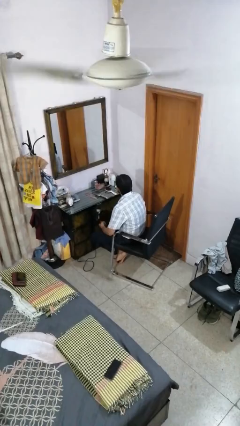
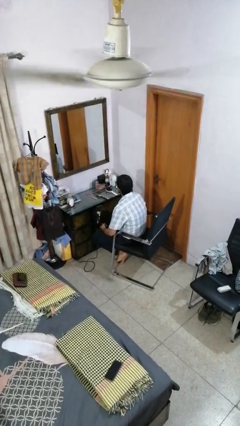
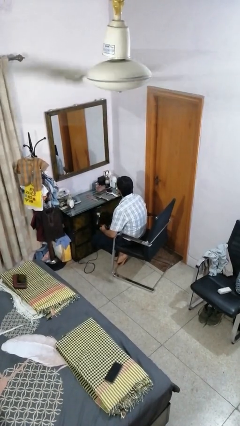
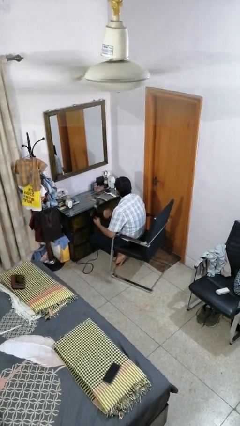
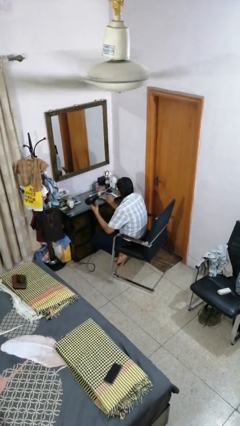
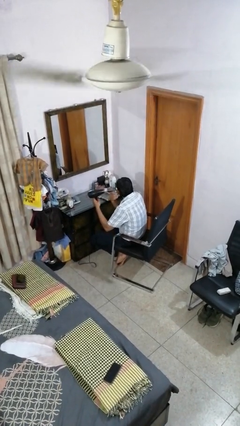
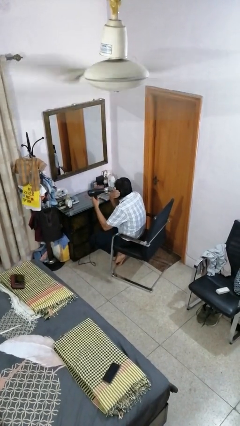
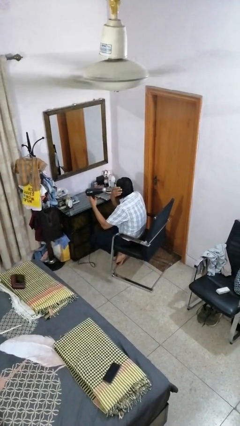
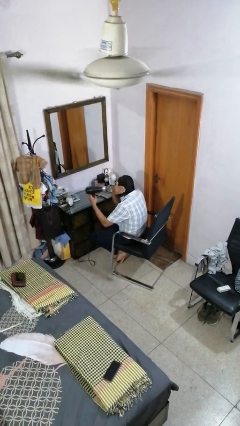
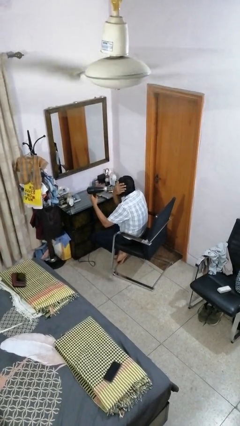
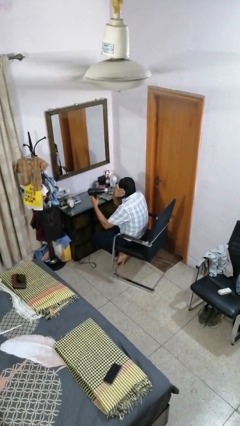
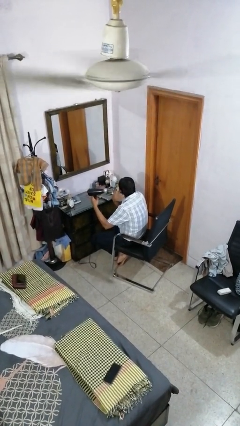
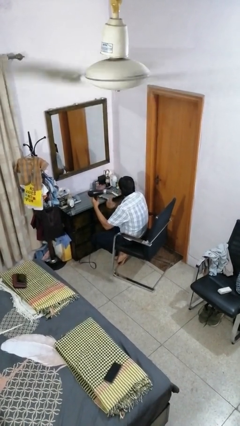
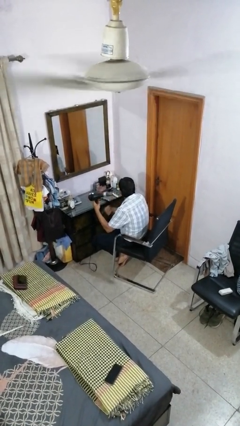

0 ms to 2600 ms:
person dries hair with hairdryer

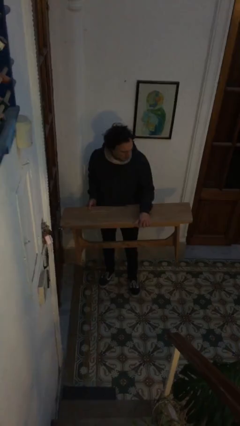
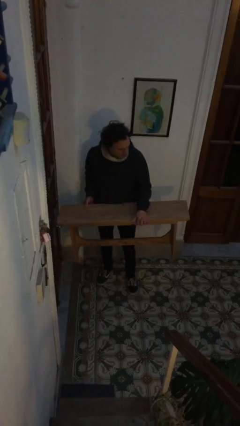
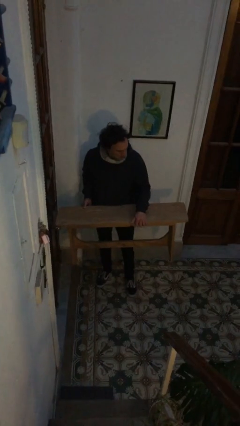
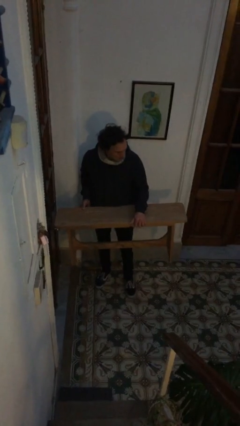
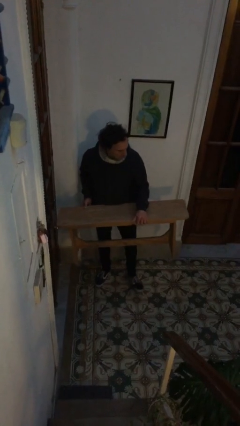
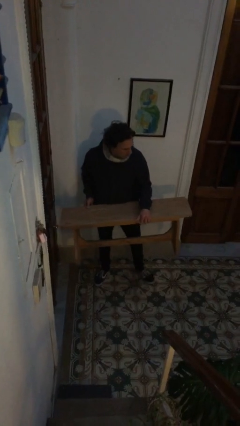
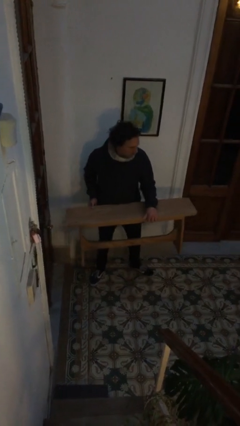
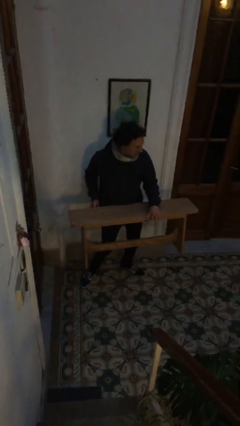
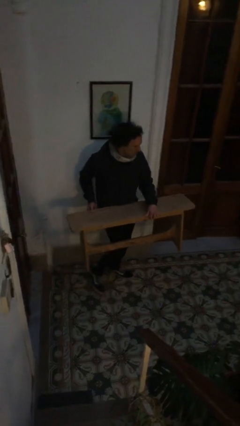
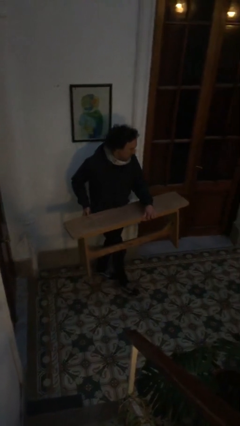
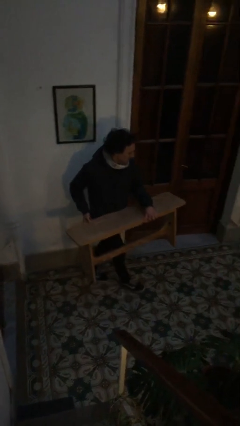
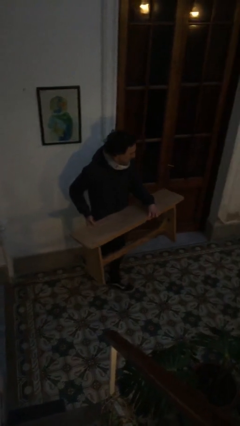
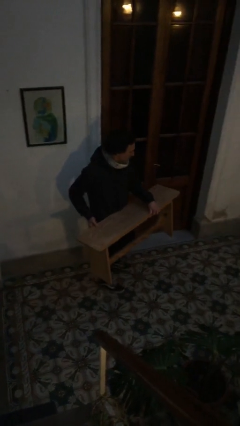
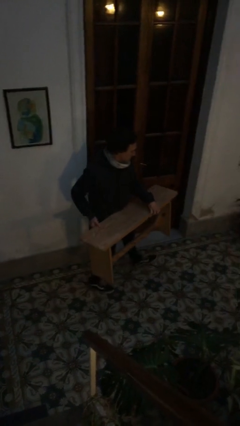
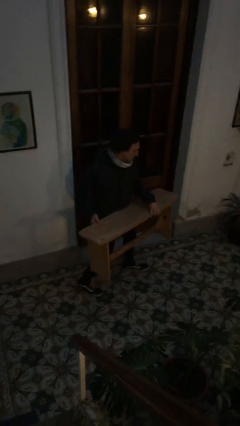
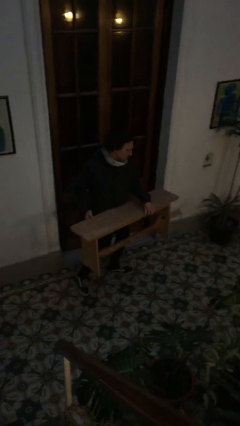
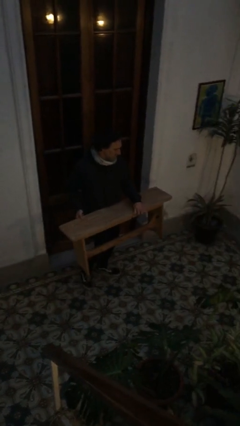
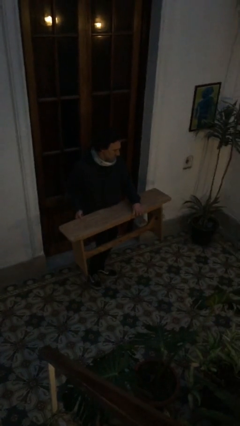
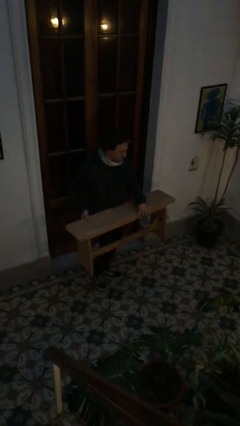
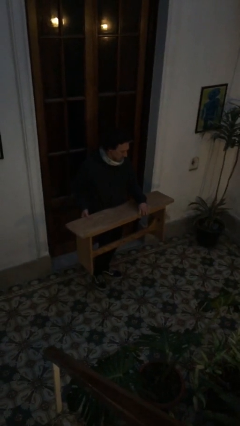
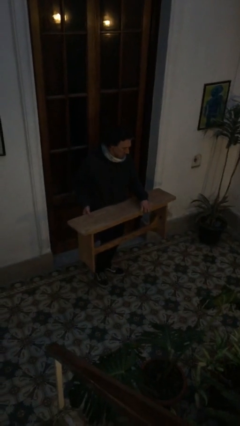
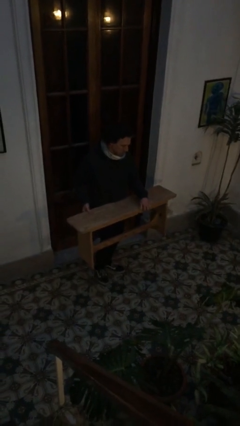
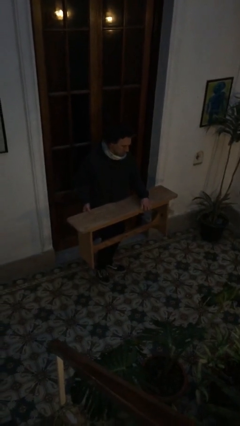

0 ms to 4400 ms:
person carries furniture

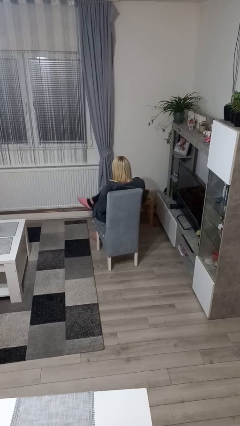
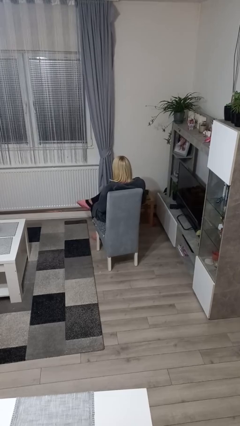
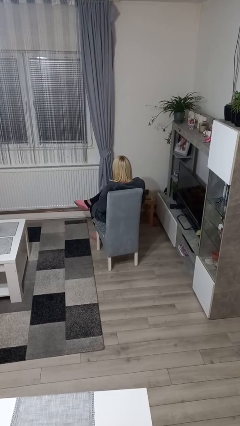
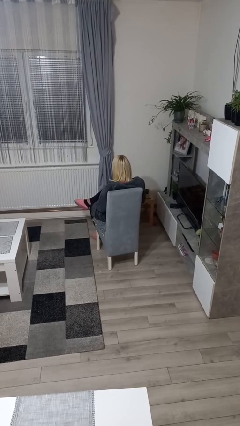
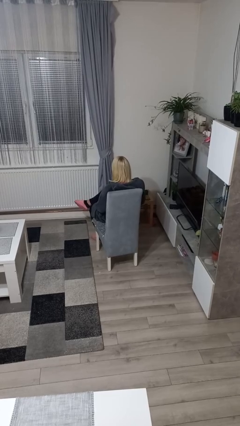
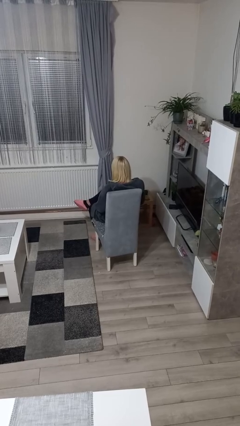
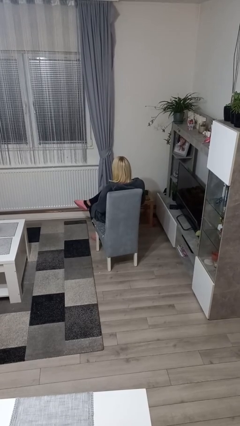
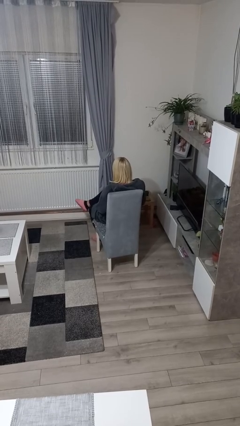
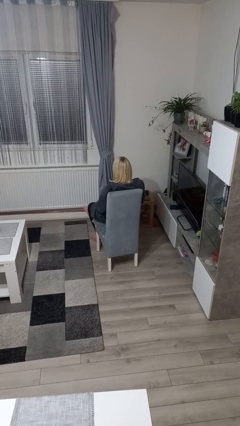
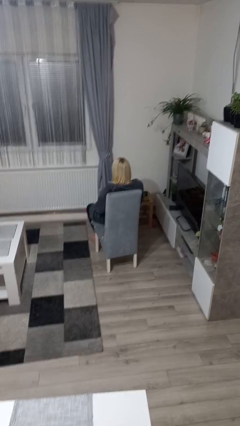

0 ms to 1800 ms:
person crosses legs

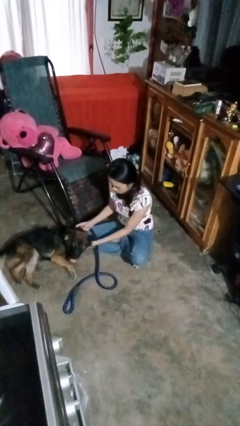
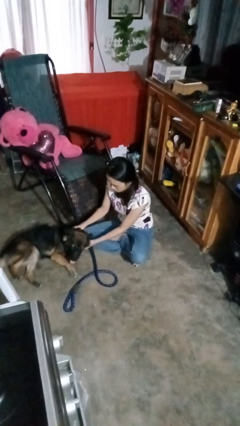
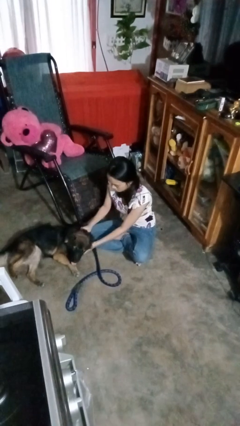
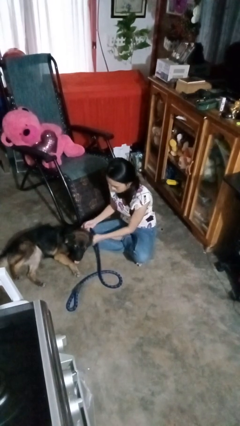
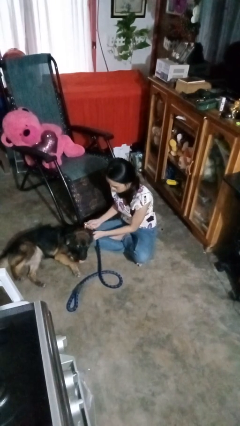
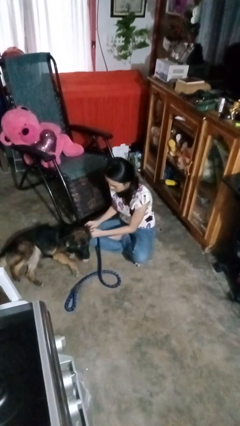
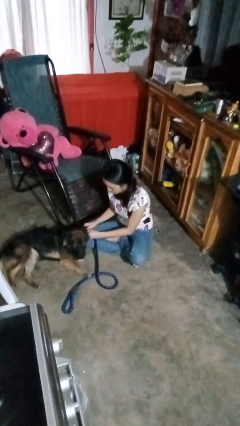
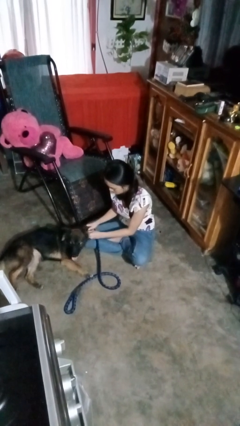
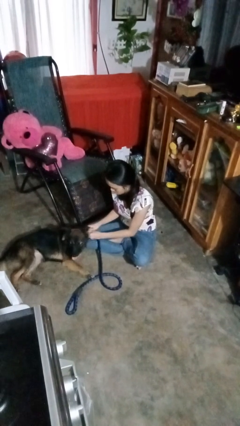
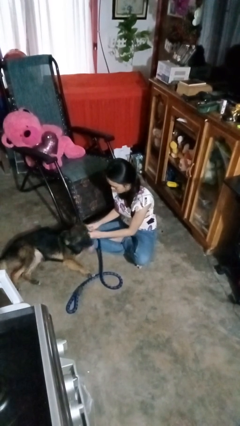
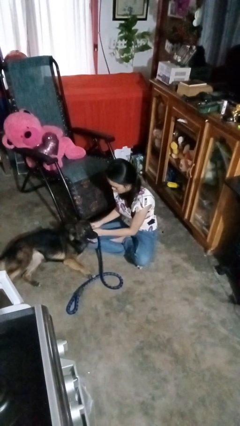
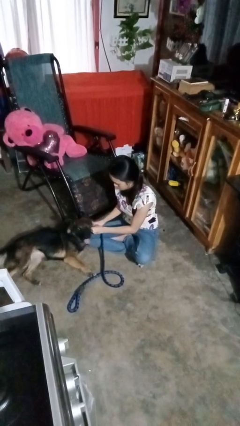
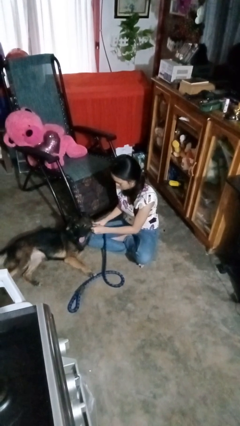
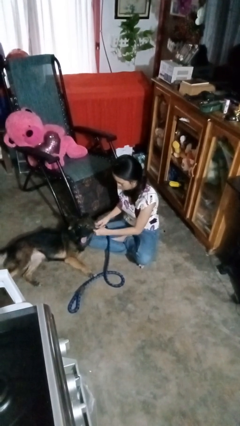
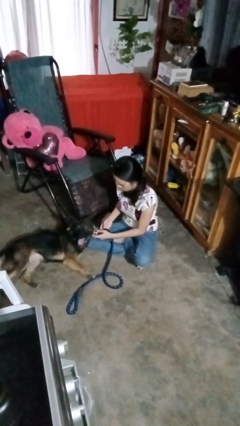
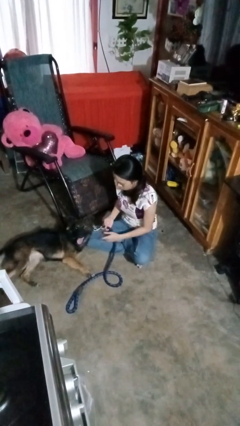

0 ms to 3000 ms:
person attaches leash to dog

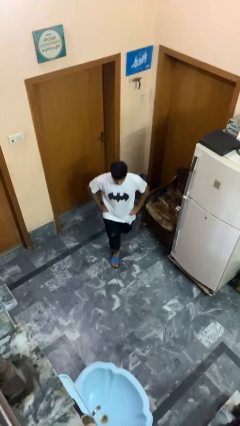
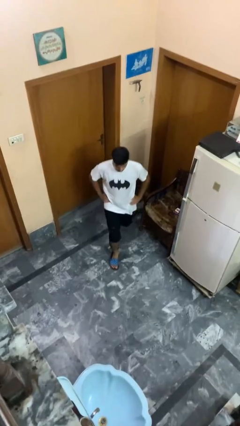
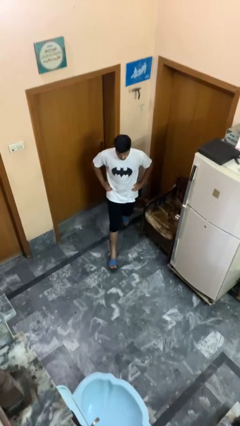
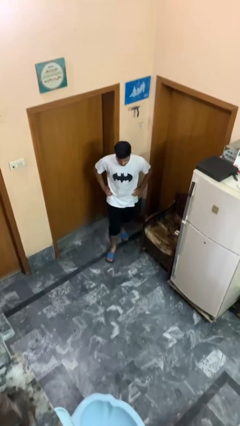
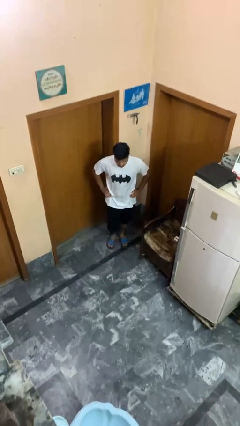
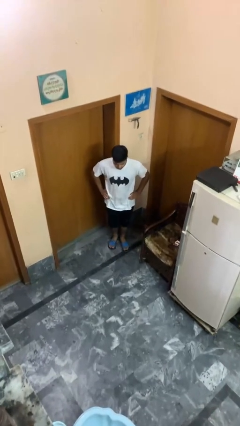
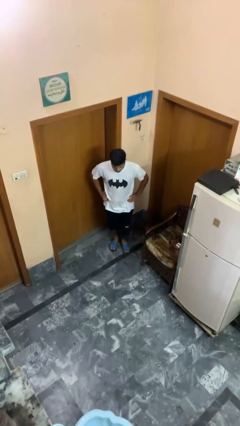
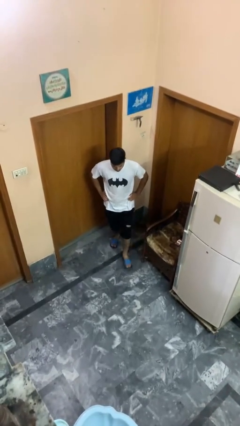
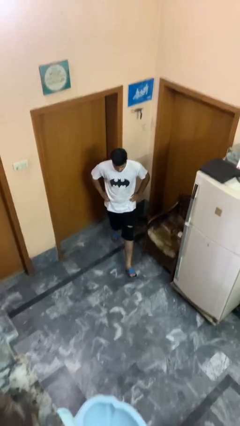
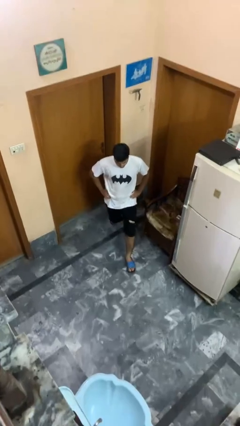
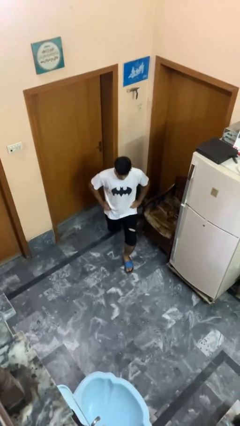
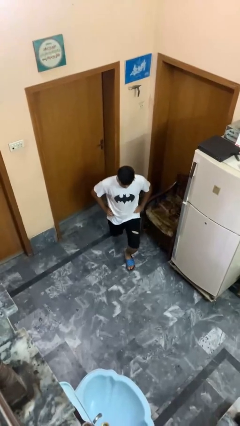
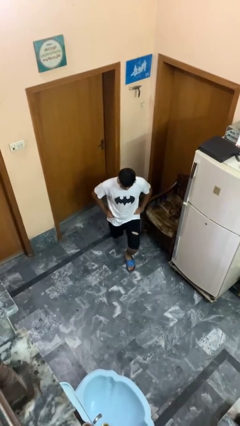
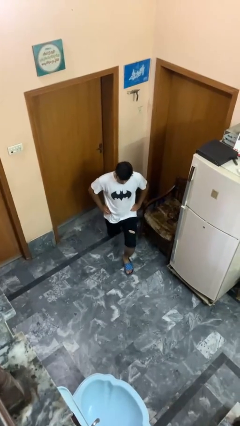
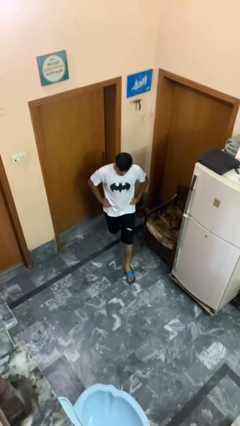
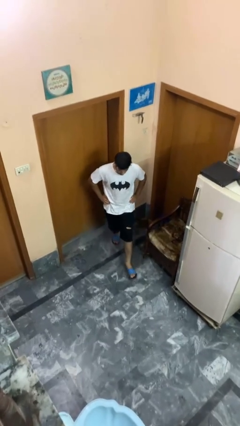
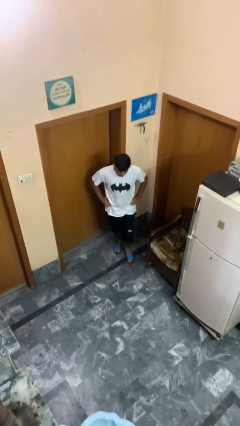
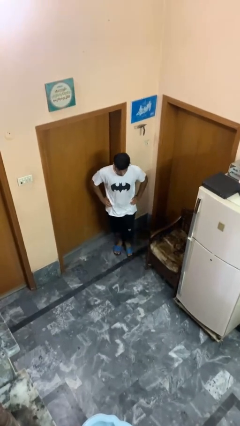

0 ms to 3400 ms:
person exercises with lunges

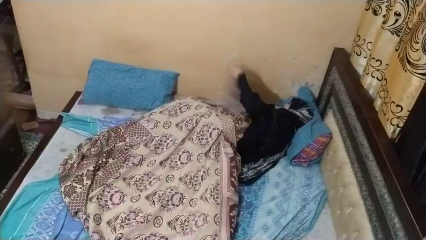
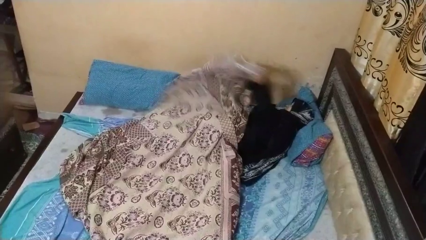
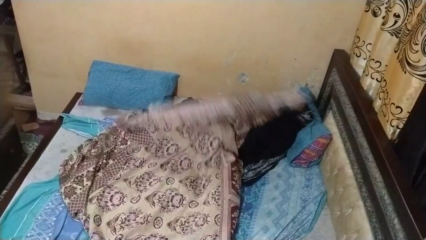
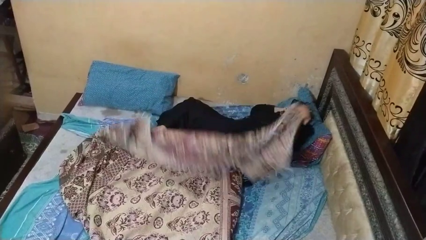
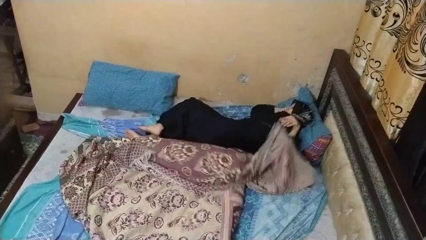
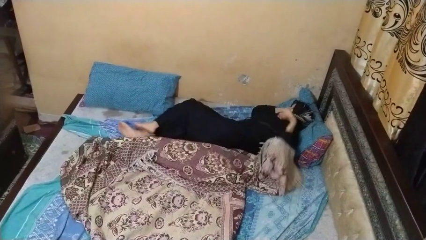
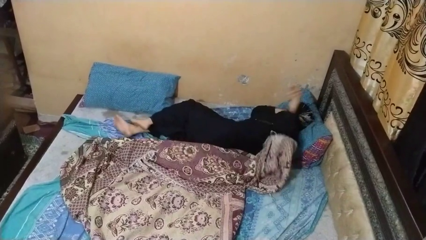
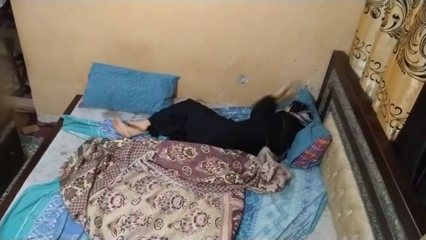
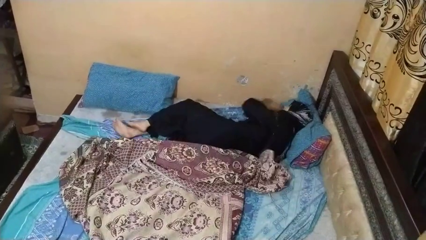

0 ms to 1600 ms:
person uncovers with blanket

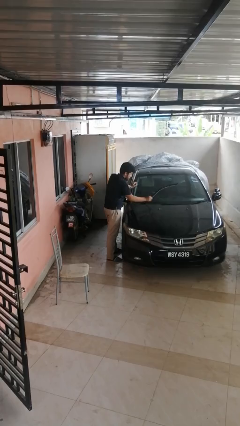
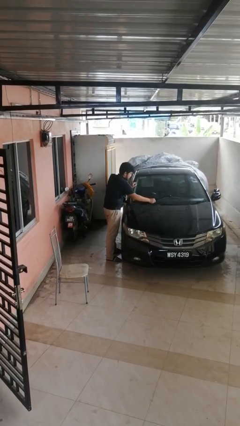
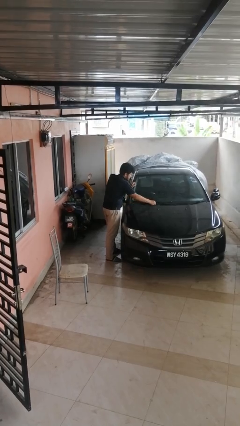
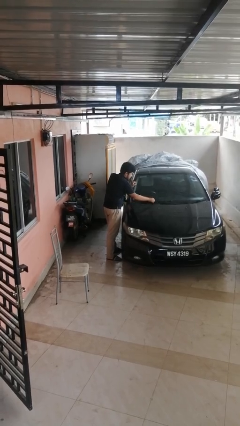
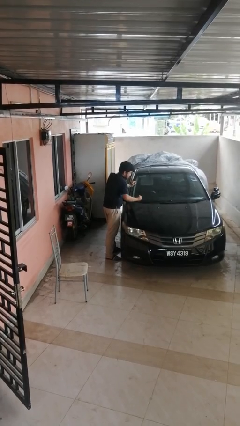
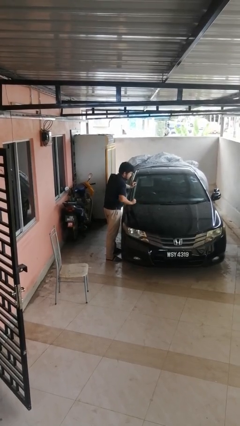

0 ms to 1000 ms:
person flips down car wipers
